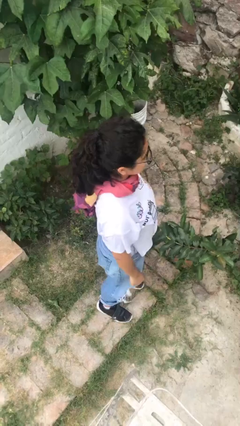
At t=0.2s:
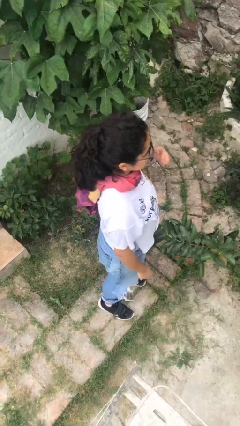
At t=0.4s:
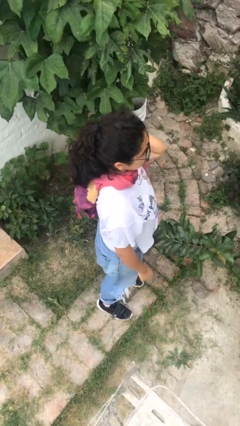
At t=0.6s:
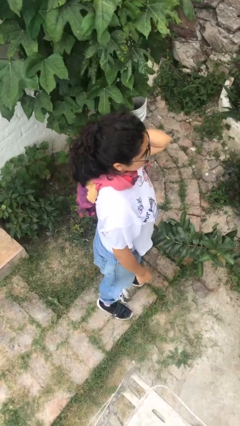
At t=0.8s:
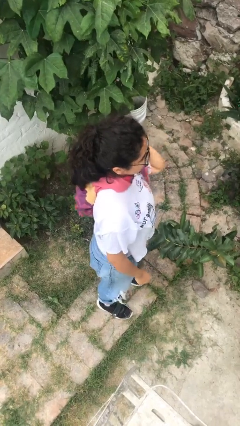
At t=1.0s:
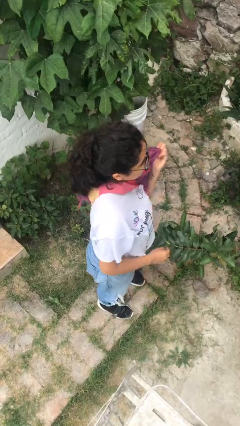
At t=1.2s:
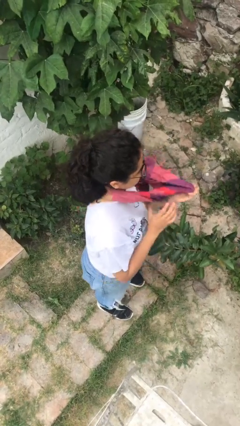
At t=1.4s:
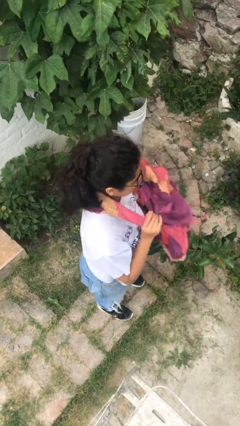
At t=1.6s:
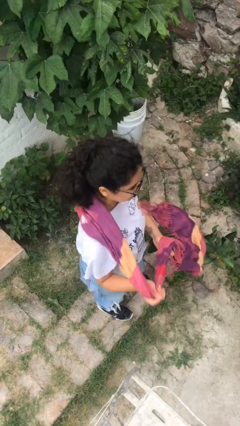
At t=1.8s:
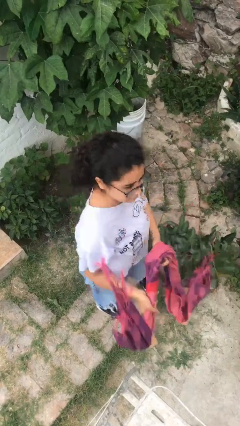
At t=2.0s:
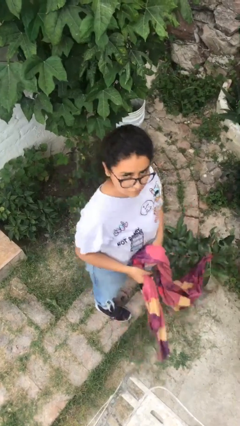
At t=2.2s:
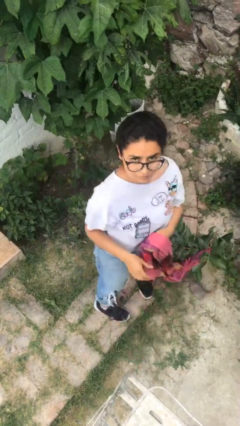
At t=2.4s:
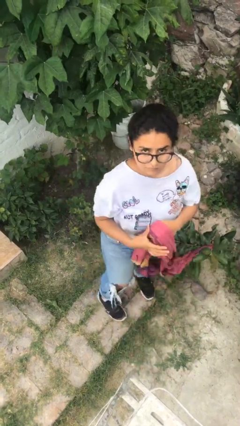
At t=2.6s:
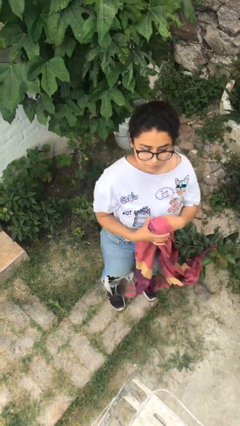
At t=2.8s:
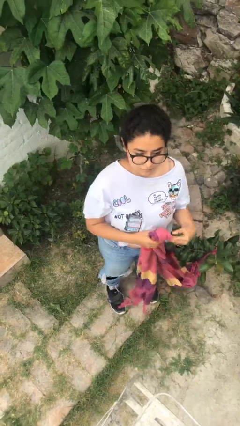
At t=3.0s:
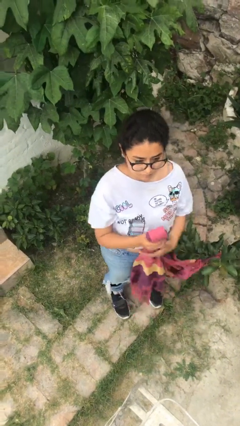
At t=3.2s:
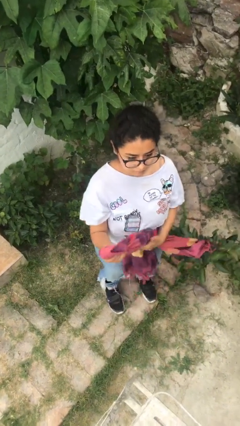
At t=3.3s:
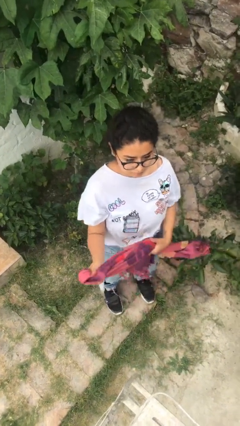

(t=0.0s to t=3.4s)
person takes off scarf

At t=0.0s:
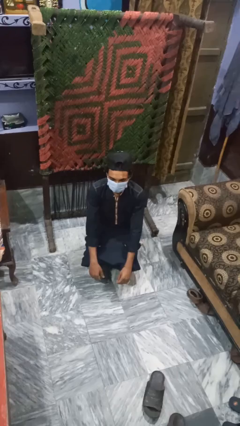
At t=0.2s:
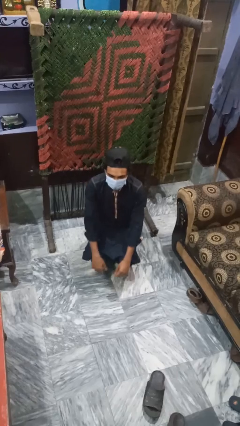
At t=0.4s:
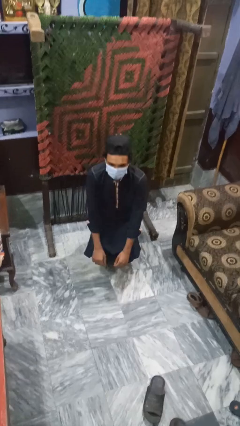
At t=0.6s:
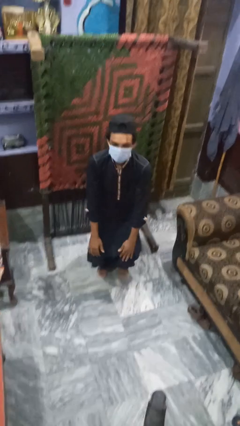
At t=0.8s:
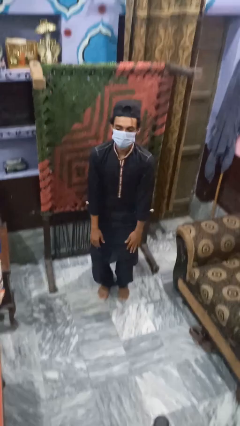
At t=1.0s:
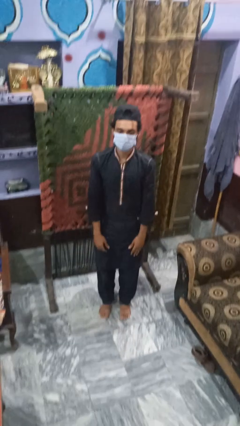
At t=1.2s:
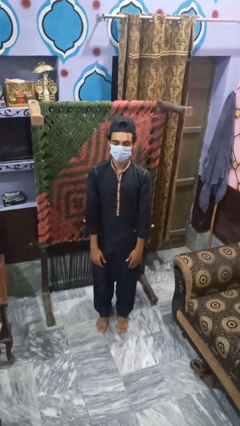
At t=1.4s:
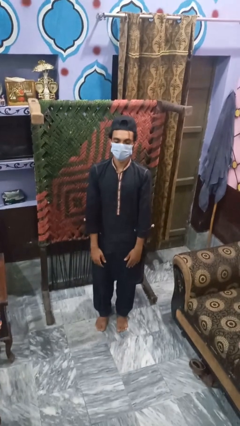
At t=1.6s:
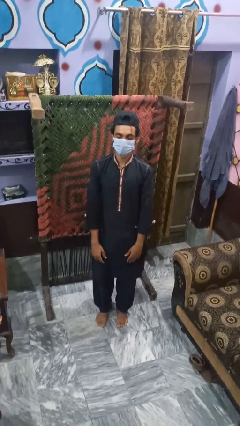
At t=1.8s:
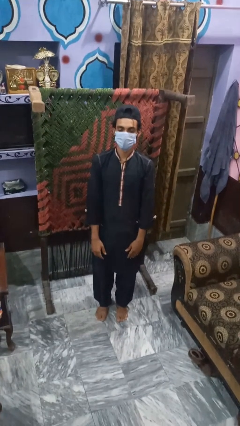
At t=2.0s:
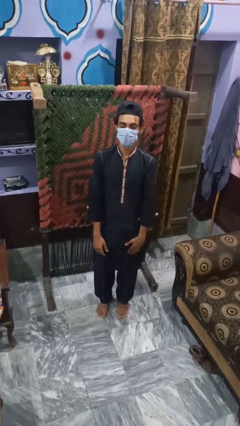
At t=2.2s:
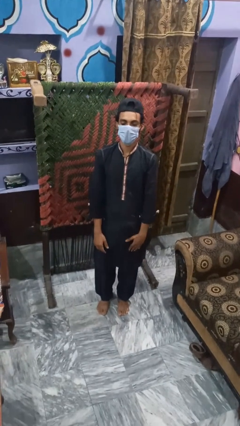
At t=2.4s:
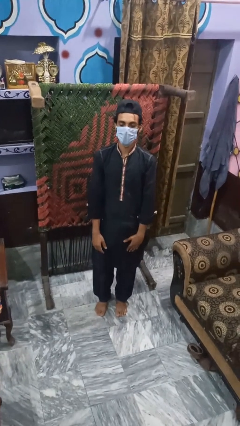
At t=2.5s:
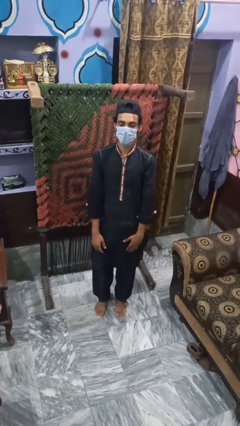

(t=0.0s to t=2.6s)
person stands up

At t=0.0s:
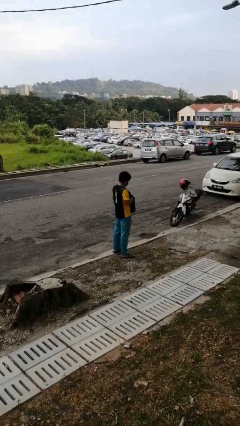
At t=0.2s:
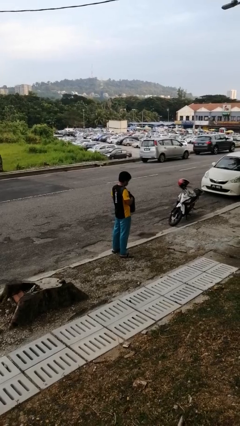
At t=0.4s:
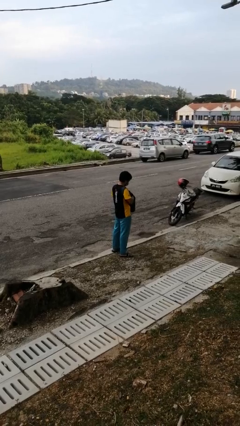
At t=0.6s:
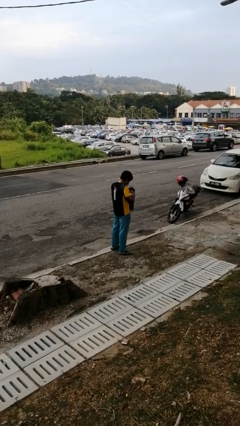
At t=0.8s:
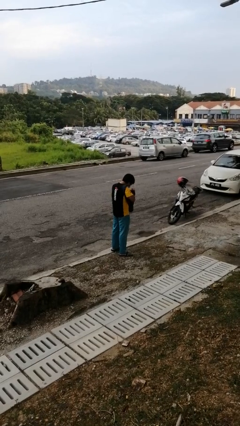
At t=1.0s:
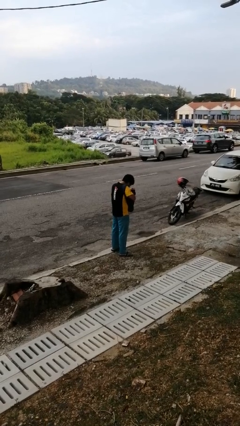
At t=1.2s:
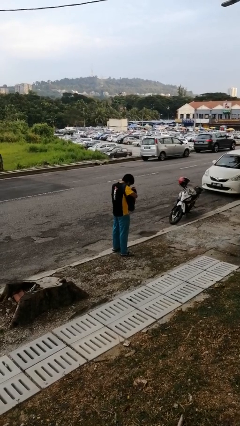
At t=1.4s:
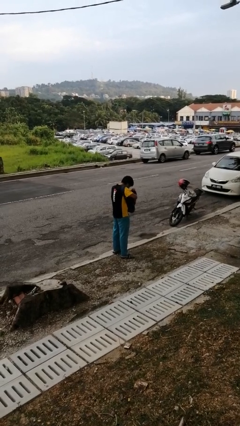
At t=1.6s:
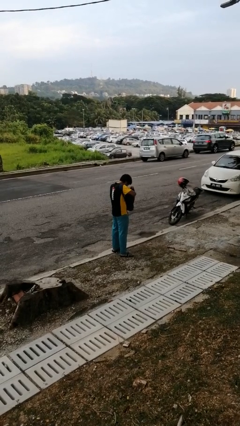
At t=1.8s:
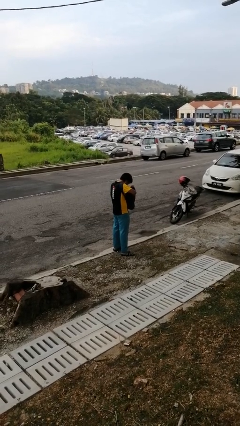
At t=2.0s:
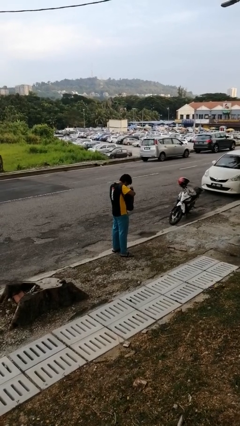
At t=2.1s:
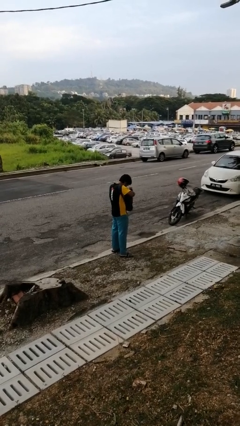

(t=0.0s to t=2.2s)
person searches in backpack

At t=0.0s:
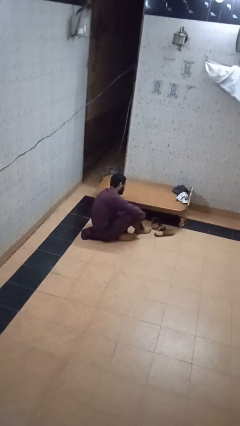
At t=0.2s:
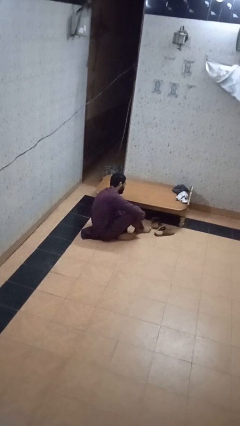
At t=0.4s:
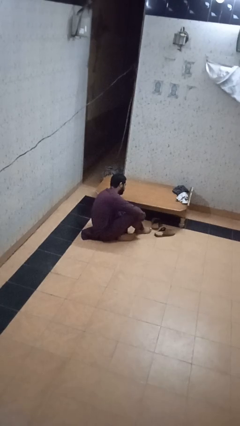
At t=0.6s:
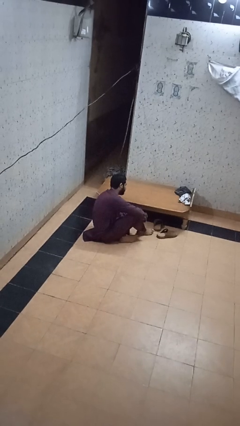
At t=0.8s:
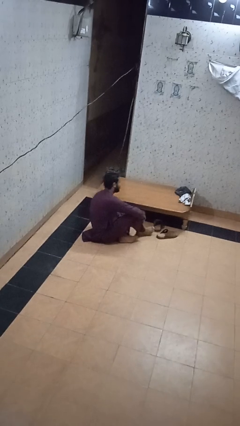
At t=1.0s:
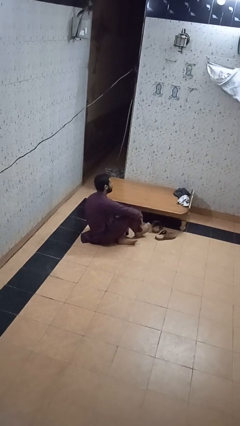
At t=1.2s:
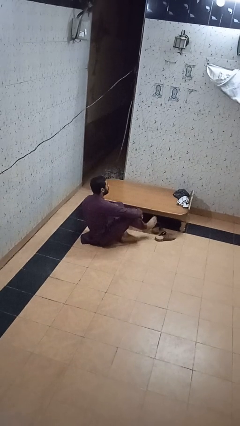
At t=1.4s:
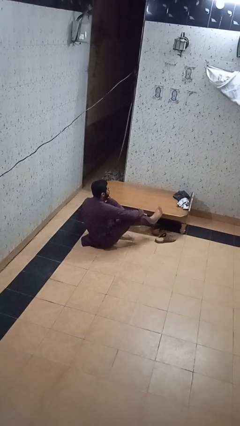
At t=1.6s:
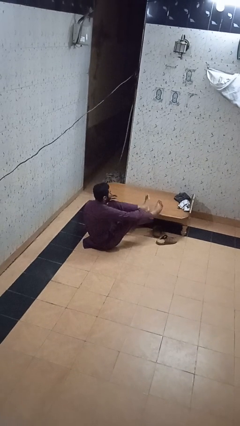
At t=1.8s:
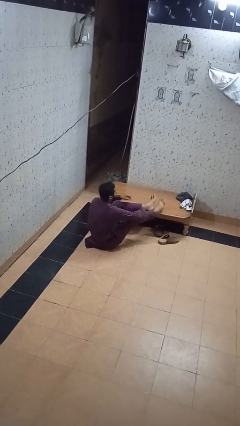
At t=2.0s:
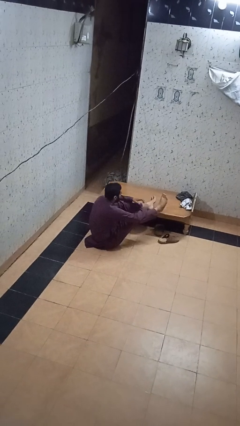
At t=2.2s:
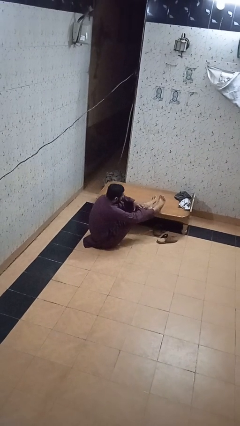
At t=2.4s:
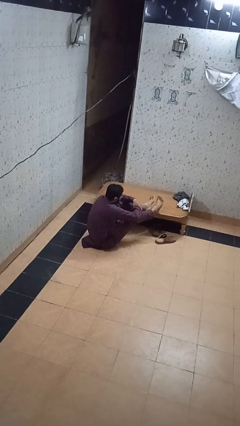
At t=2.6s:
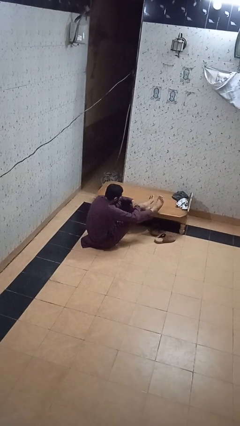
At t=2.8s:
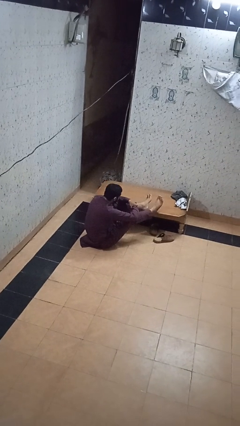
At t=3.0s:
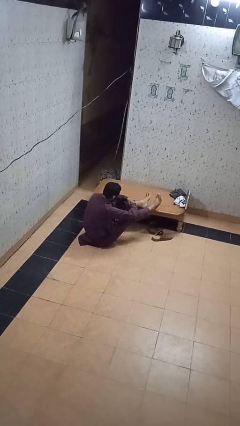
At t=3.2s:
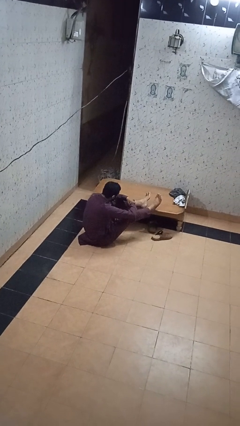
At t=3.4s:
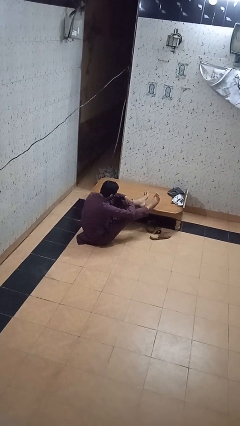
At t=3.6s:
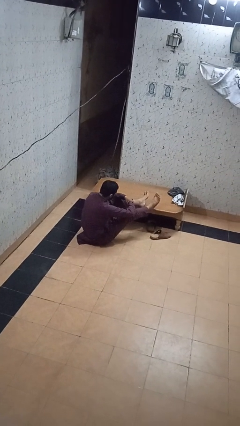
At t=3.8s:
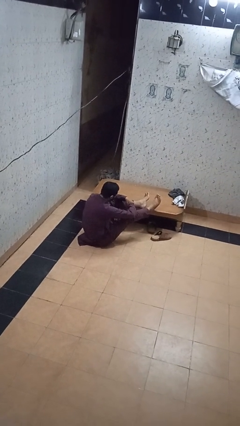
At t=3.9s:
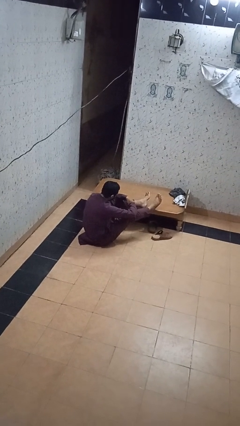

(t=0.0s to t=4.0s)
person puts feet up

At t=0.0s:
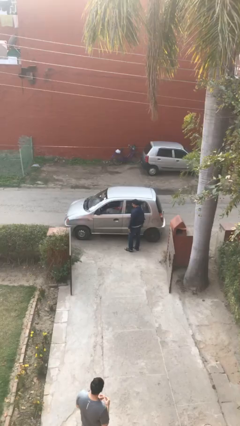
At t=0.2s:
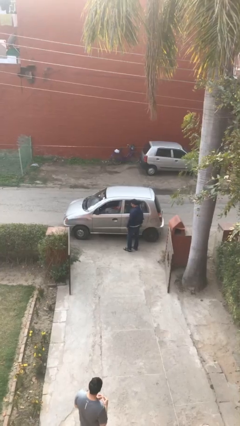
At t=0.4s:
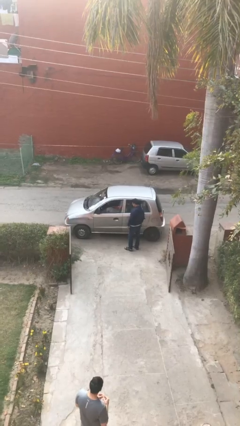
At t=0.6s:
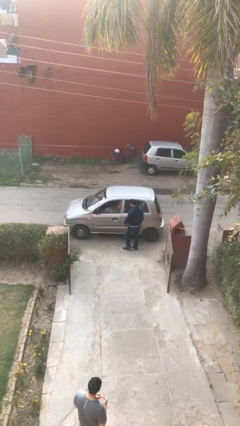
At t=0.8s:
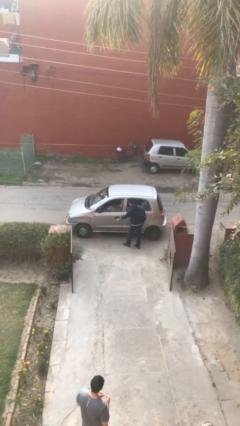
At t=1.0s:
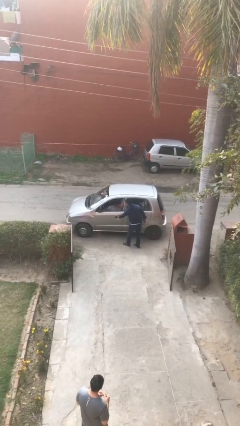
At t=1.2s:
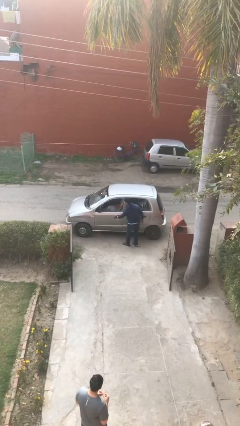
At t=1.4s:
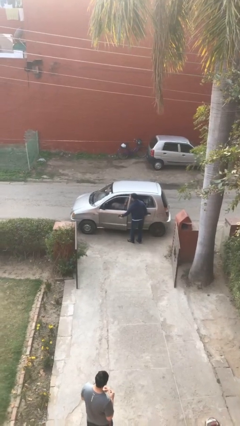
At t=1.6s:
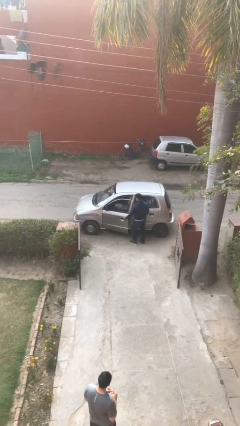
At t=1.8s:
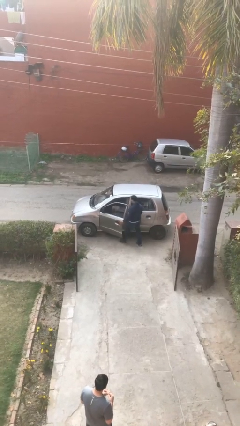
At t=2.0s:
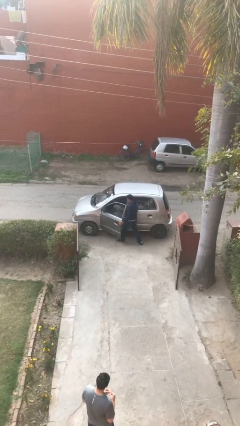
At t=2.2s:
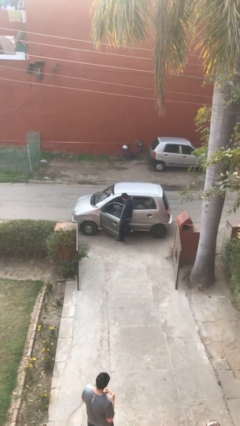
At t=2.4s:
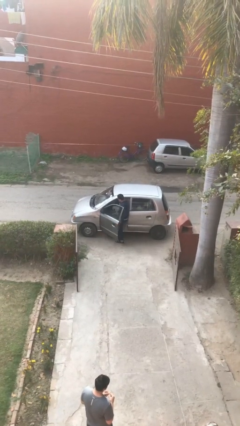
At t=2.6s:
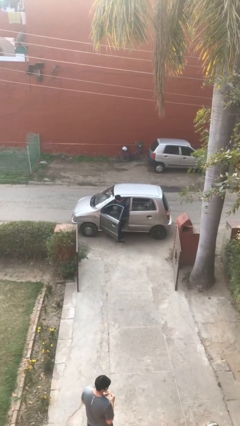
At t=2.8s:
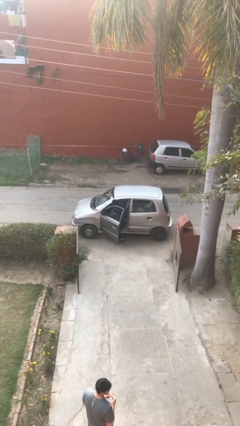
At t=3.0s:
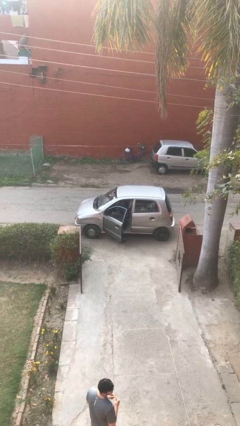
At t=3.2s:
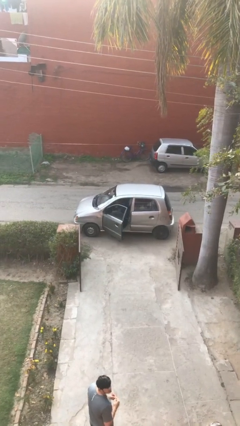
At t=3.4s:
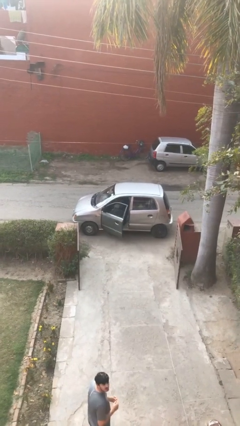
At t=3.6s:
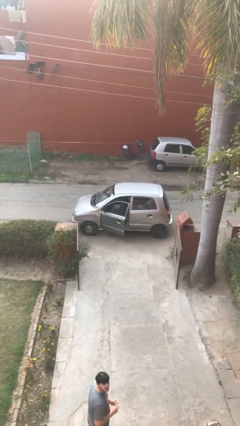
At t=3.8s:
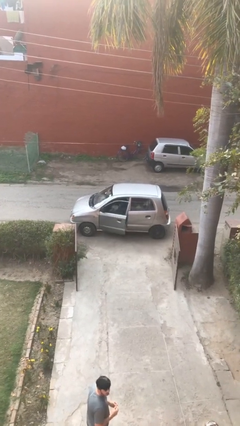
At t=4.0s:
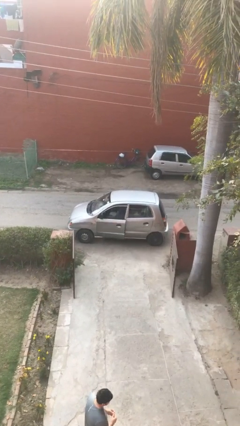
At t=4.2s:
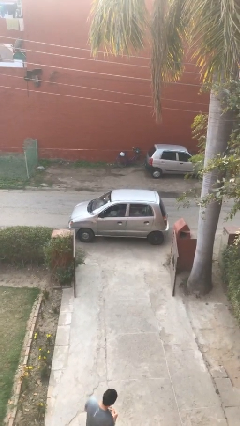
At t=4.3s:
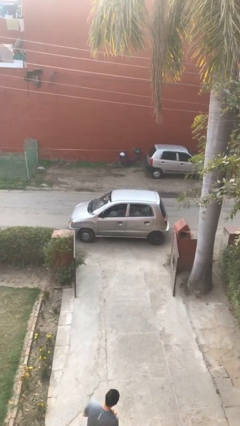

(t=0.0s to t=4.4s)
car picks up person

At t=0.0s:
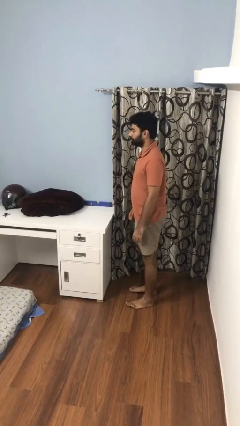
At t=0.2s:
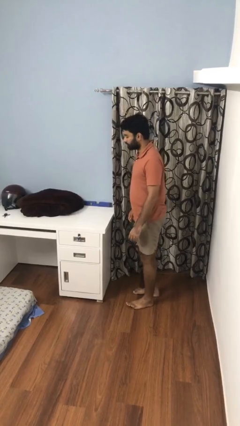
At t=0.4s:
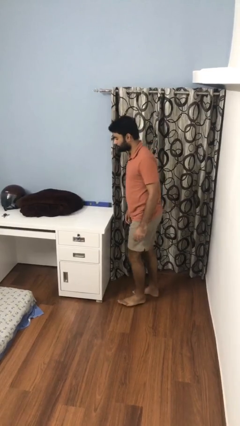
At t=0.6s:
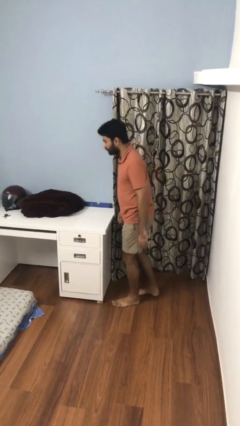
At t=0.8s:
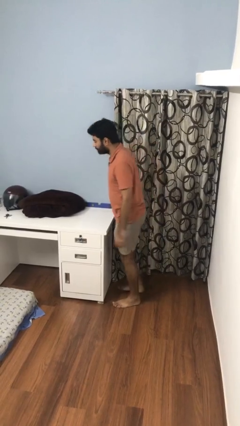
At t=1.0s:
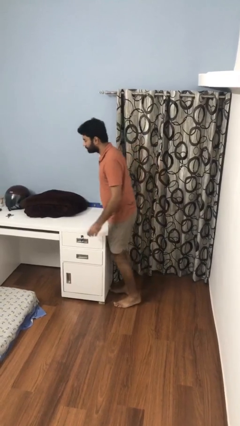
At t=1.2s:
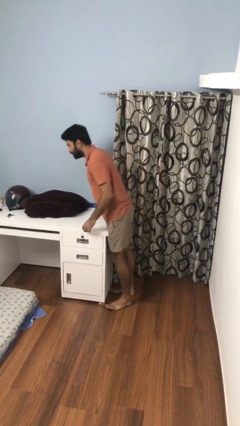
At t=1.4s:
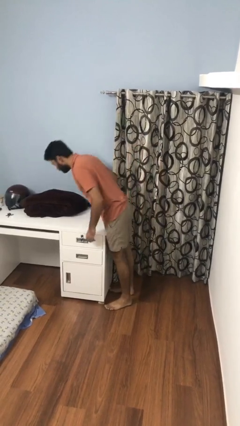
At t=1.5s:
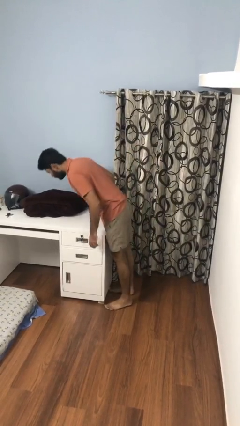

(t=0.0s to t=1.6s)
person bumps into table
